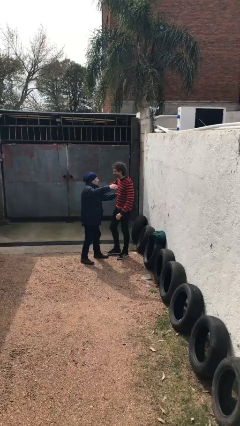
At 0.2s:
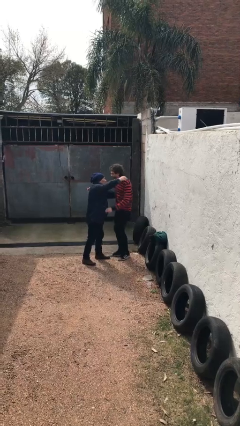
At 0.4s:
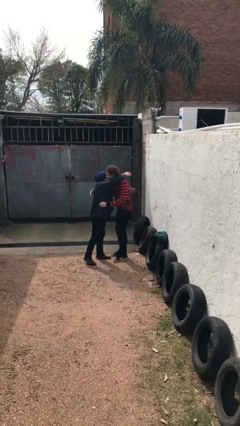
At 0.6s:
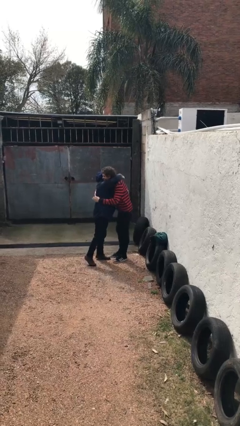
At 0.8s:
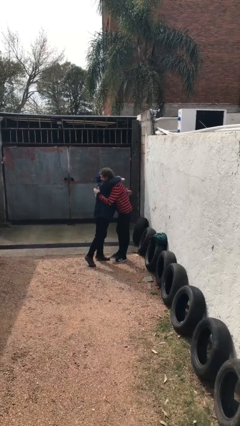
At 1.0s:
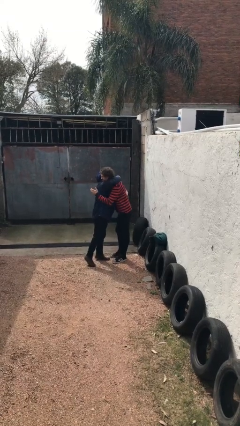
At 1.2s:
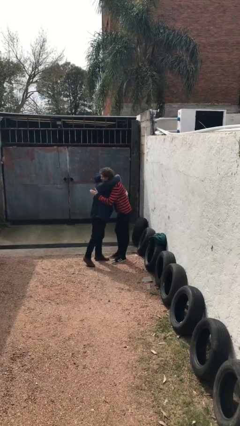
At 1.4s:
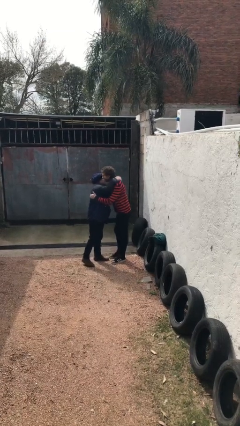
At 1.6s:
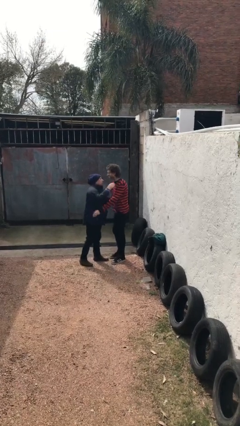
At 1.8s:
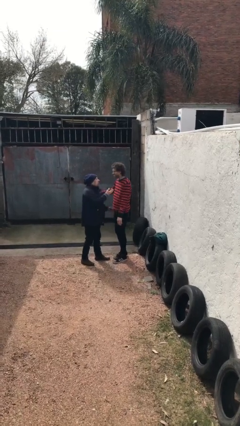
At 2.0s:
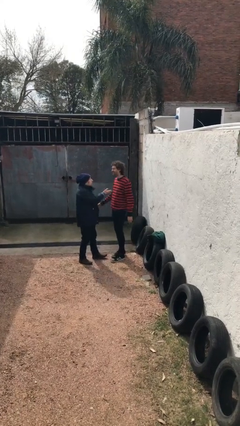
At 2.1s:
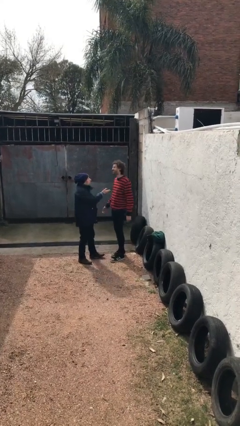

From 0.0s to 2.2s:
person embraces person

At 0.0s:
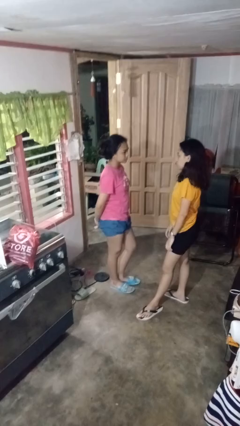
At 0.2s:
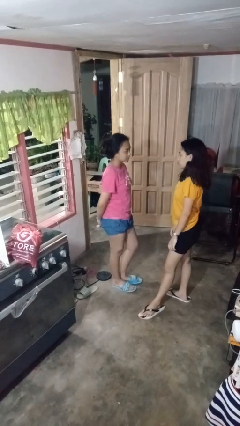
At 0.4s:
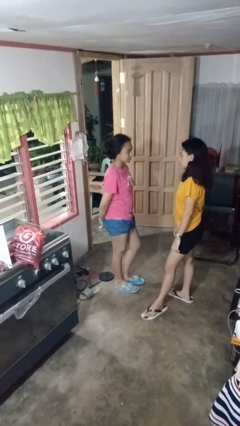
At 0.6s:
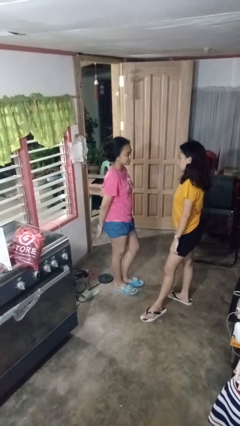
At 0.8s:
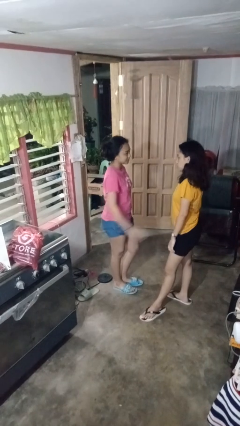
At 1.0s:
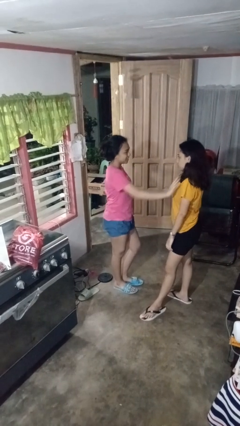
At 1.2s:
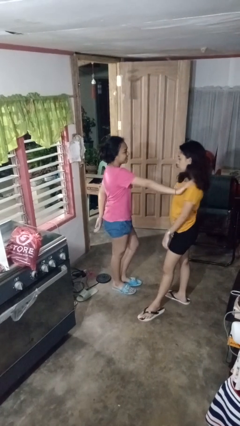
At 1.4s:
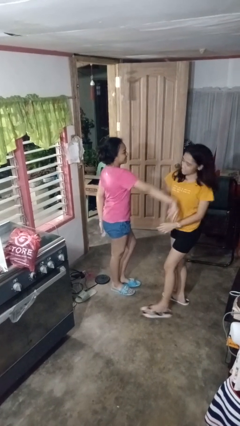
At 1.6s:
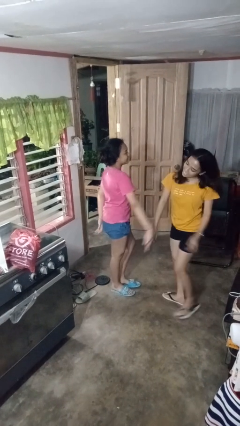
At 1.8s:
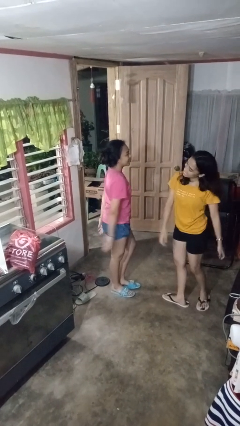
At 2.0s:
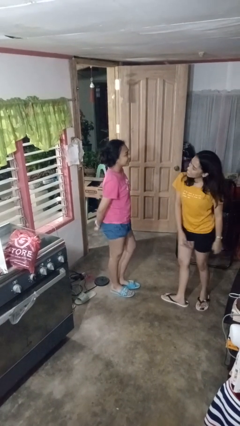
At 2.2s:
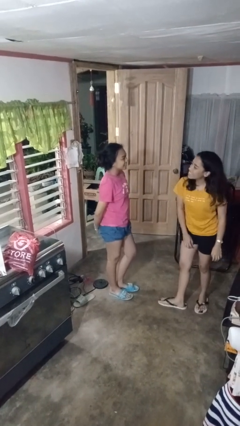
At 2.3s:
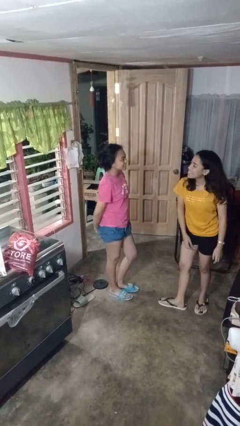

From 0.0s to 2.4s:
person shoves person

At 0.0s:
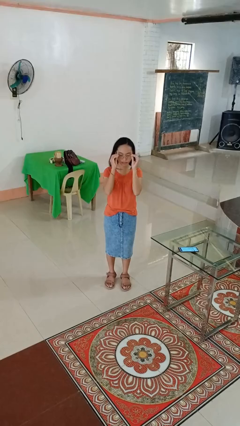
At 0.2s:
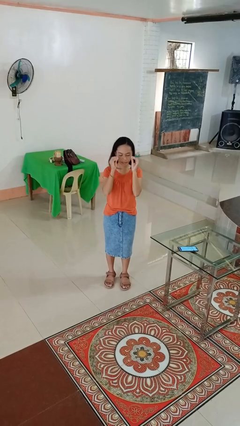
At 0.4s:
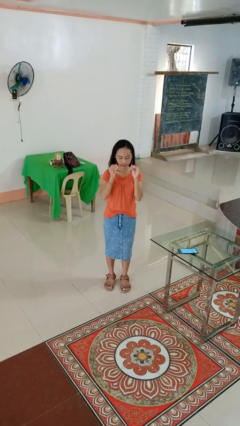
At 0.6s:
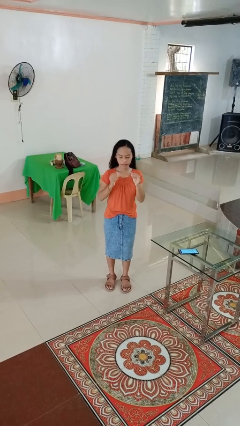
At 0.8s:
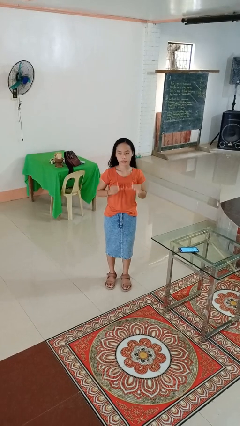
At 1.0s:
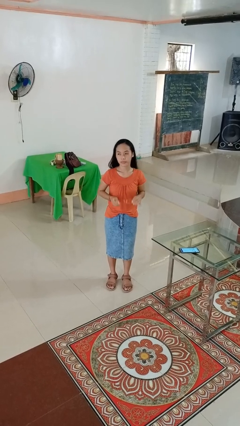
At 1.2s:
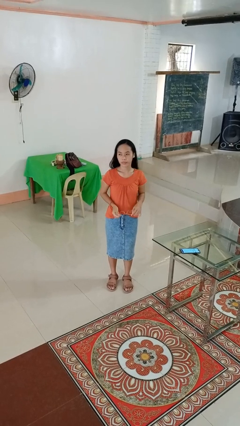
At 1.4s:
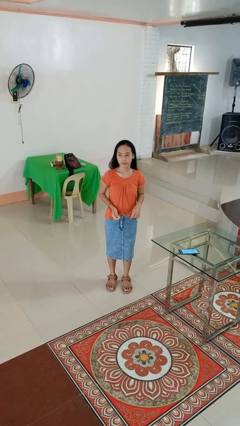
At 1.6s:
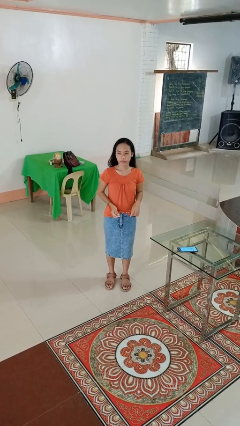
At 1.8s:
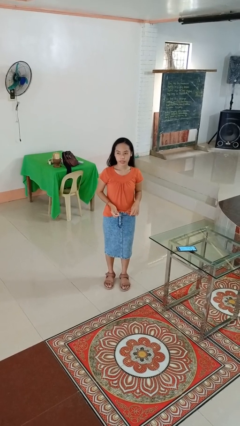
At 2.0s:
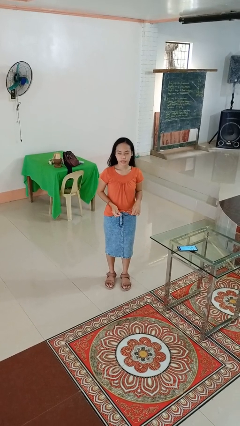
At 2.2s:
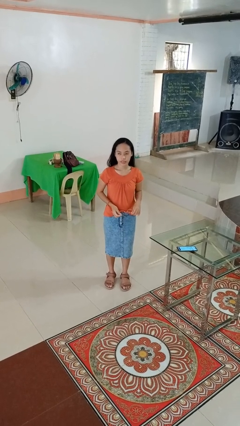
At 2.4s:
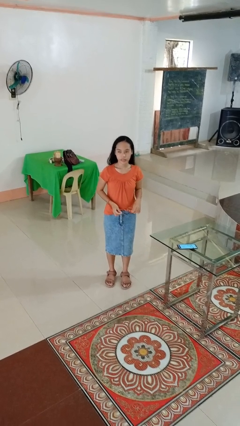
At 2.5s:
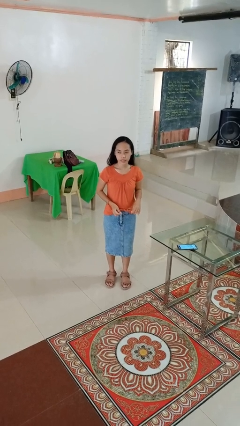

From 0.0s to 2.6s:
person takes off glasses

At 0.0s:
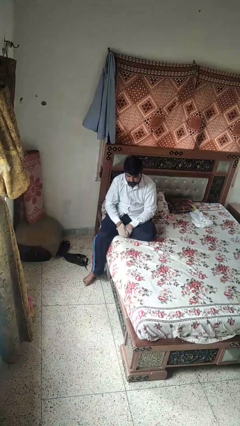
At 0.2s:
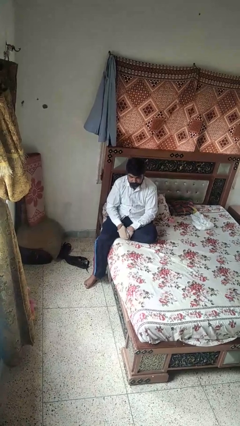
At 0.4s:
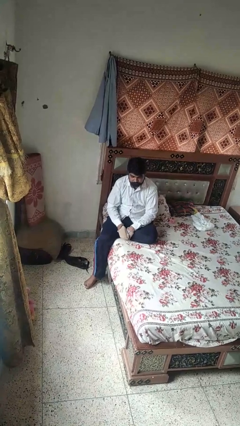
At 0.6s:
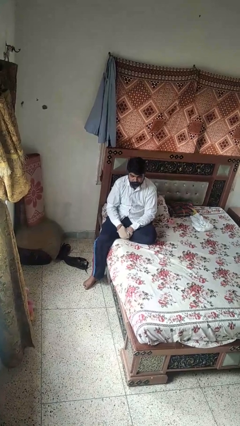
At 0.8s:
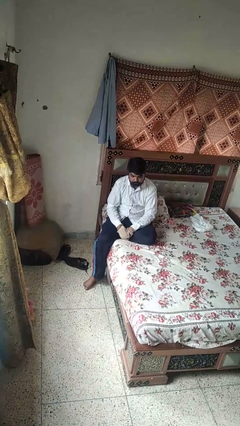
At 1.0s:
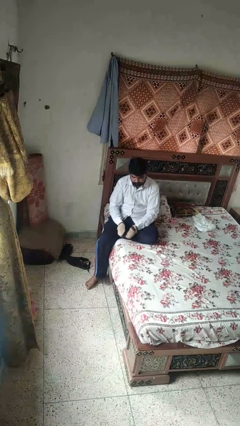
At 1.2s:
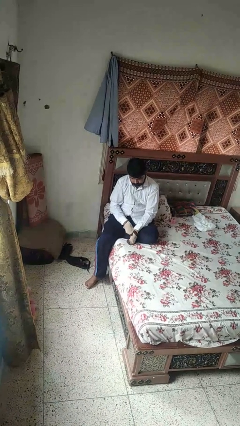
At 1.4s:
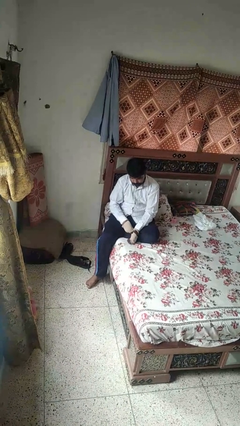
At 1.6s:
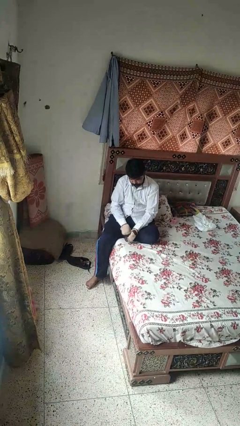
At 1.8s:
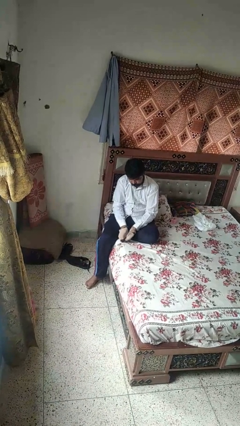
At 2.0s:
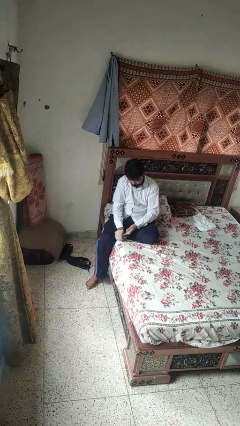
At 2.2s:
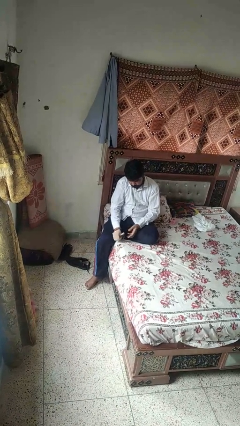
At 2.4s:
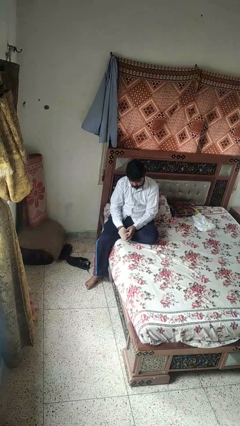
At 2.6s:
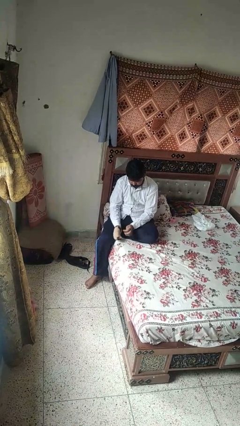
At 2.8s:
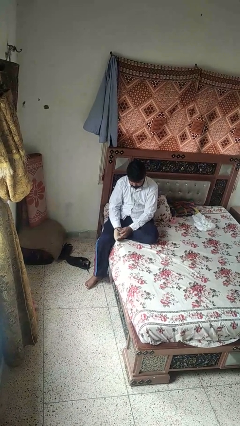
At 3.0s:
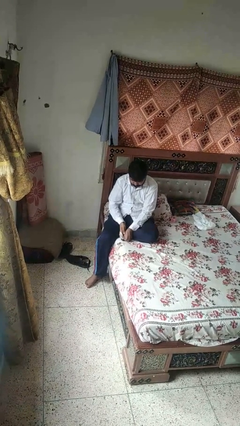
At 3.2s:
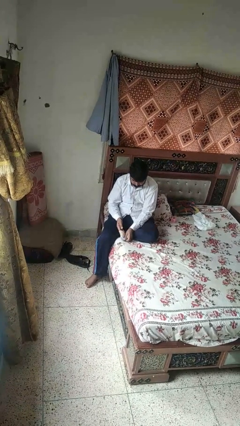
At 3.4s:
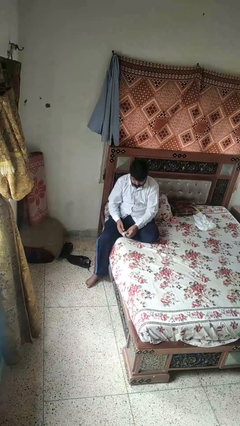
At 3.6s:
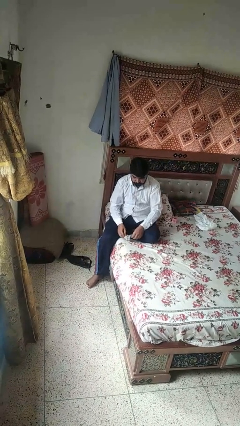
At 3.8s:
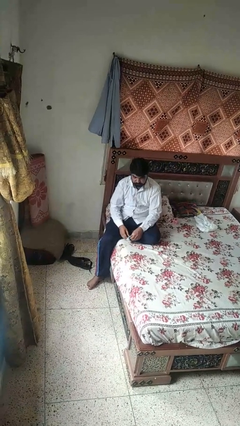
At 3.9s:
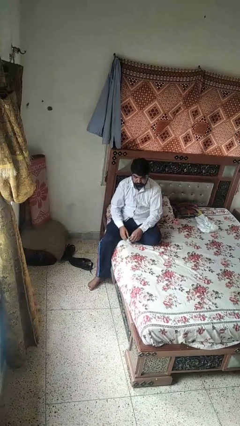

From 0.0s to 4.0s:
person takes off gloves

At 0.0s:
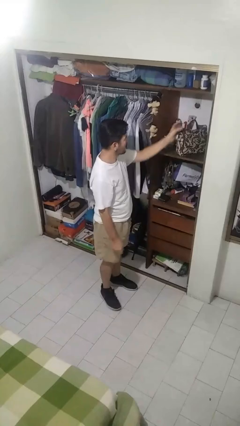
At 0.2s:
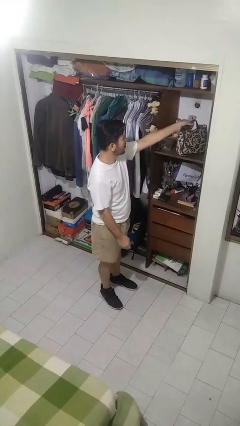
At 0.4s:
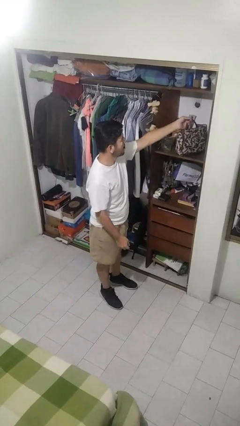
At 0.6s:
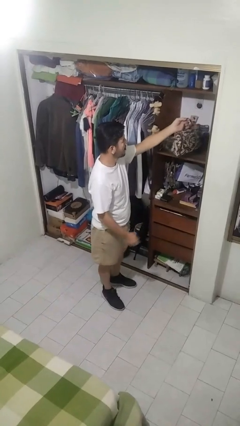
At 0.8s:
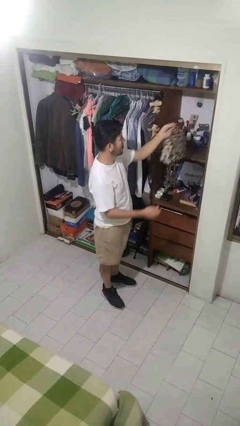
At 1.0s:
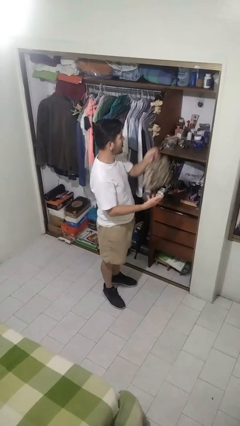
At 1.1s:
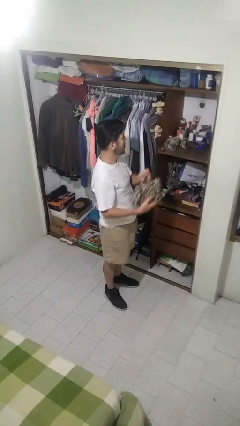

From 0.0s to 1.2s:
person puts down object on shelf

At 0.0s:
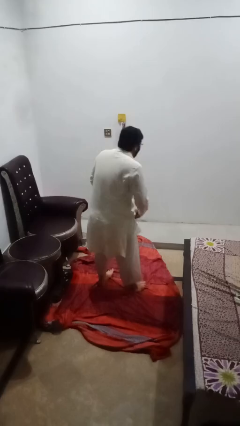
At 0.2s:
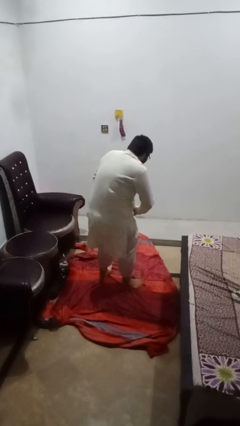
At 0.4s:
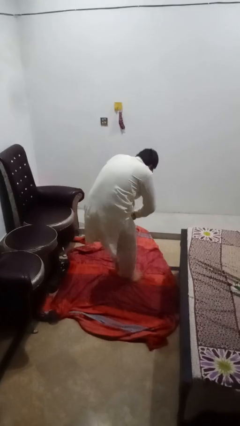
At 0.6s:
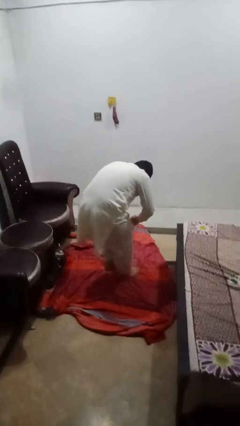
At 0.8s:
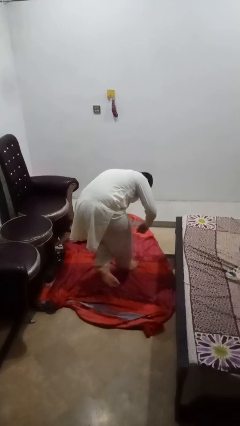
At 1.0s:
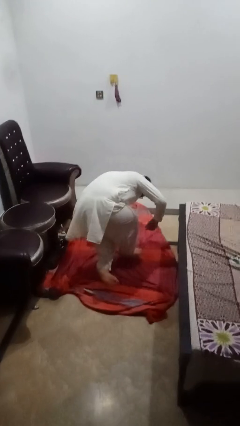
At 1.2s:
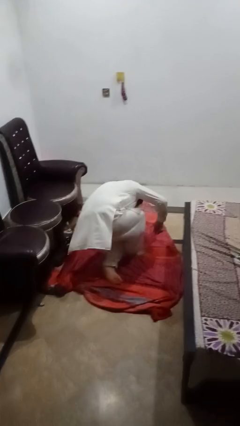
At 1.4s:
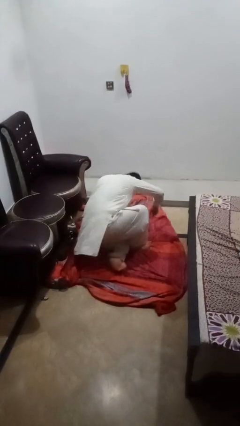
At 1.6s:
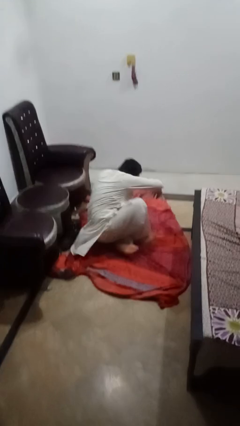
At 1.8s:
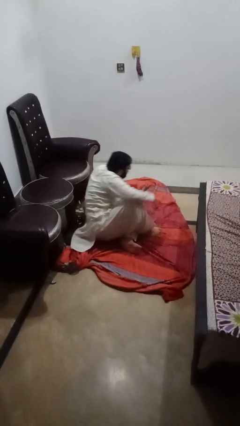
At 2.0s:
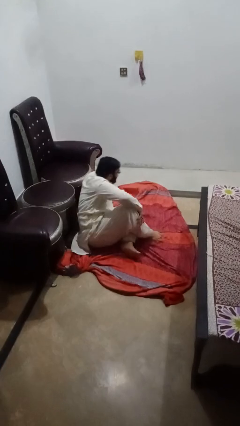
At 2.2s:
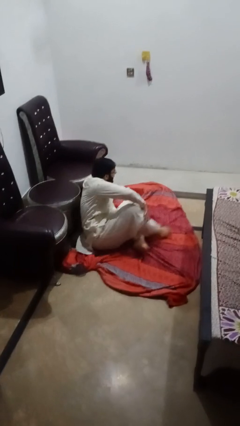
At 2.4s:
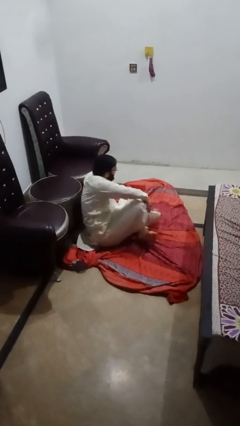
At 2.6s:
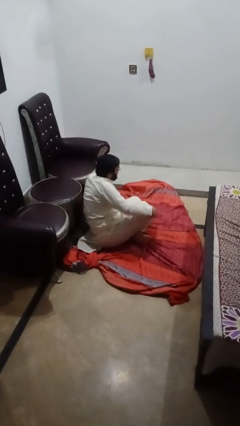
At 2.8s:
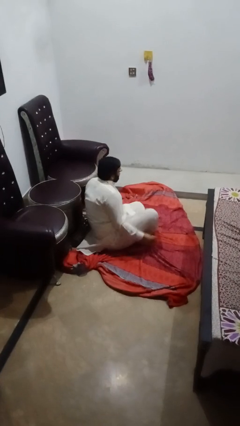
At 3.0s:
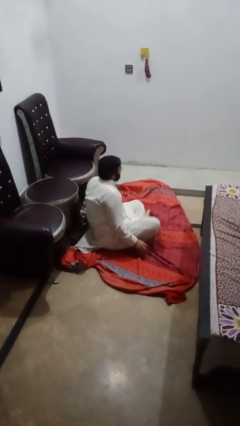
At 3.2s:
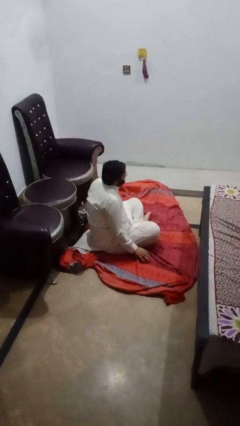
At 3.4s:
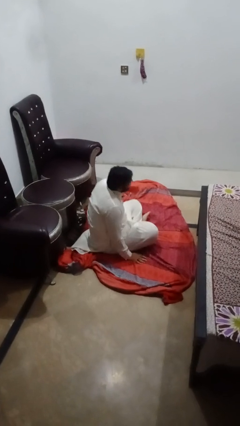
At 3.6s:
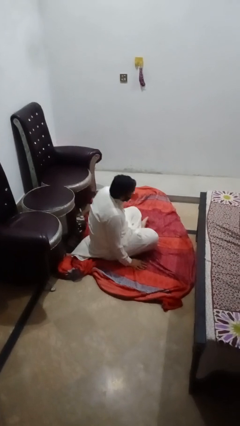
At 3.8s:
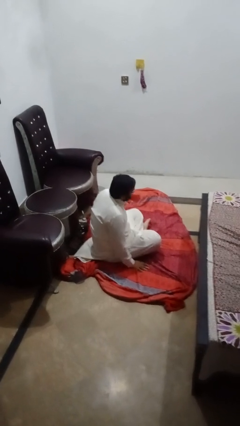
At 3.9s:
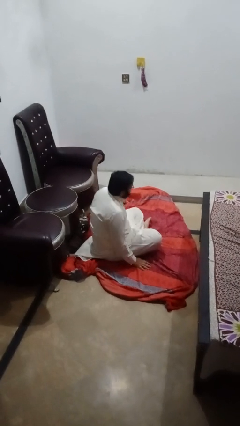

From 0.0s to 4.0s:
person sits crisscross

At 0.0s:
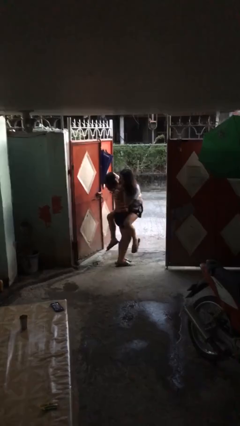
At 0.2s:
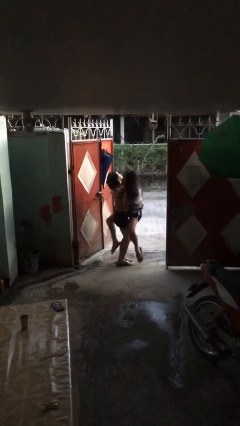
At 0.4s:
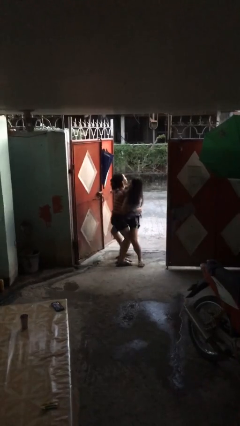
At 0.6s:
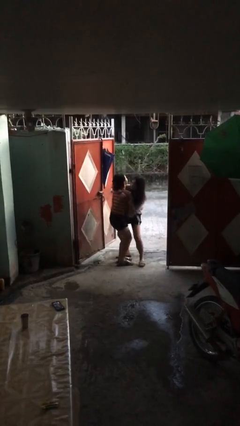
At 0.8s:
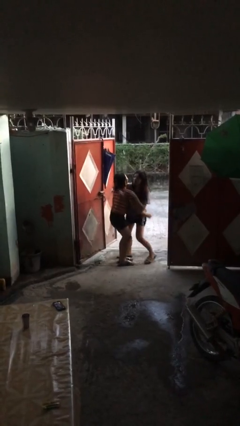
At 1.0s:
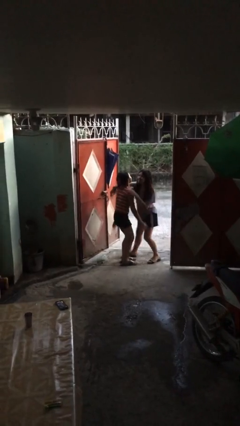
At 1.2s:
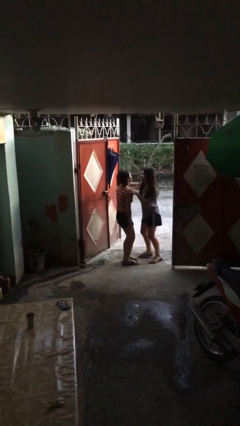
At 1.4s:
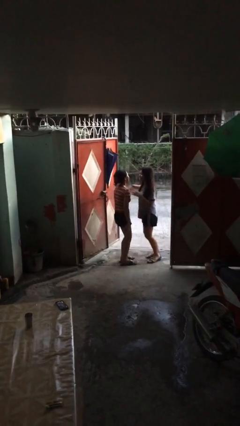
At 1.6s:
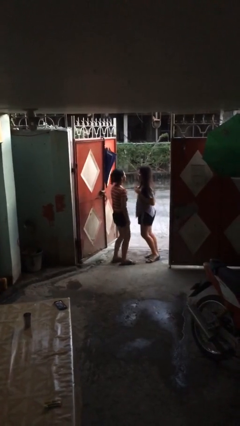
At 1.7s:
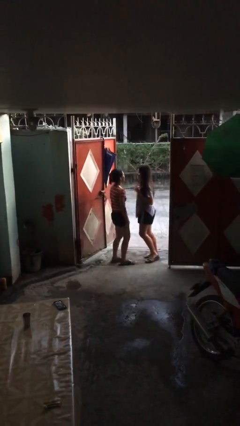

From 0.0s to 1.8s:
person puts down person
